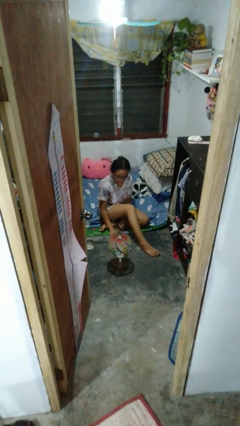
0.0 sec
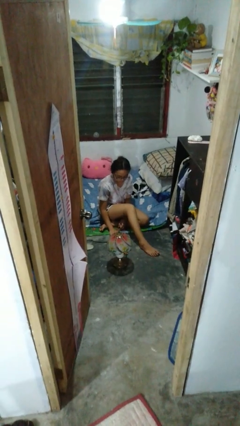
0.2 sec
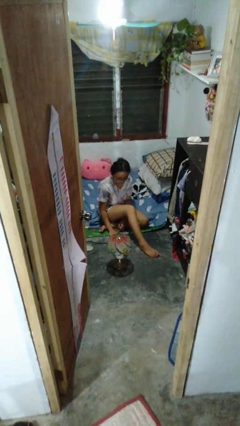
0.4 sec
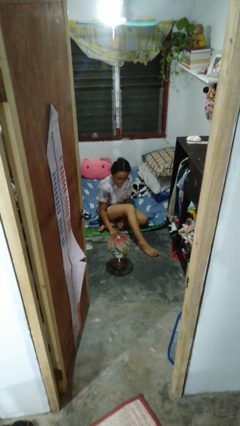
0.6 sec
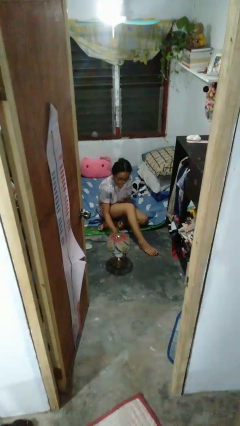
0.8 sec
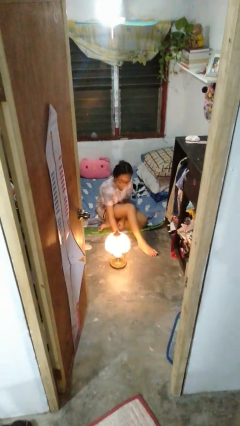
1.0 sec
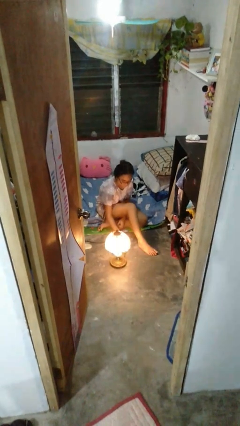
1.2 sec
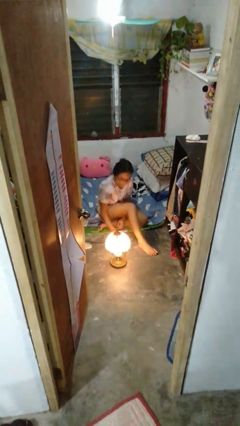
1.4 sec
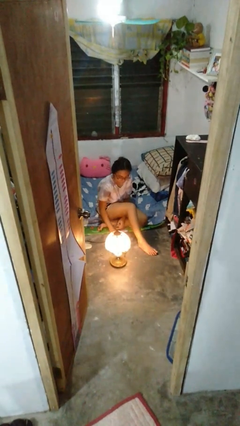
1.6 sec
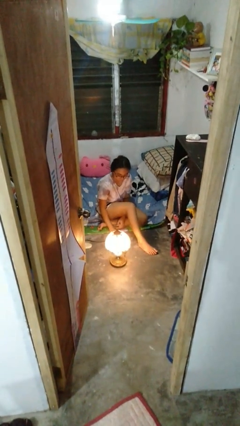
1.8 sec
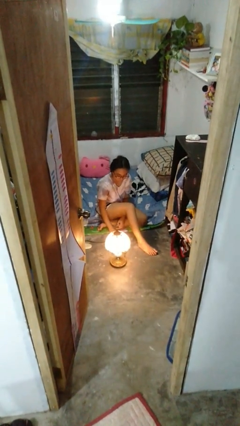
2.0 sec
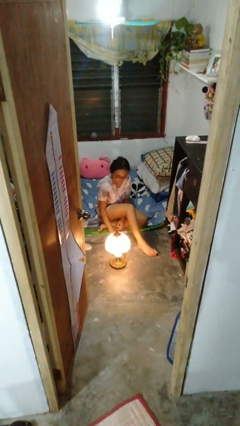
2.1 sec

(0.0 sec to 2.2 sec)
person turns on lamp

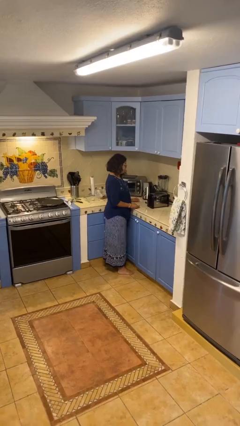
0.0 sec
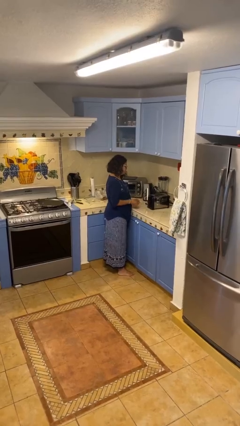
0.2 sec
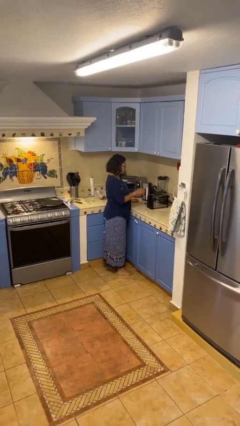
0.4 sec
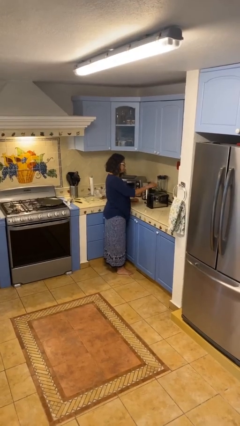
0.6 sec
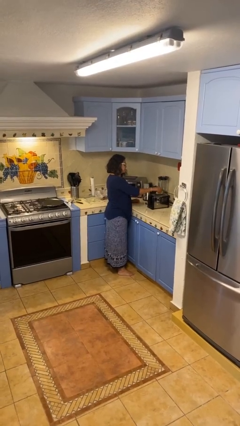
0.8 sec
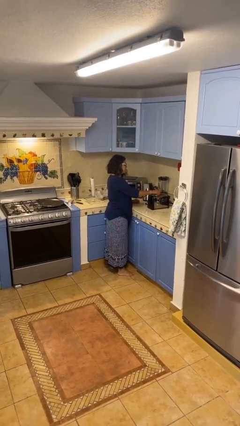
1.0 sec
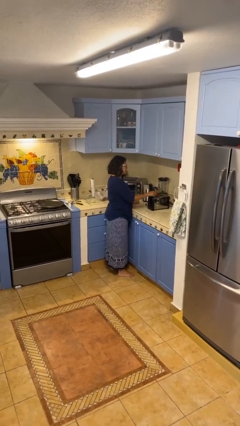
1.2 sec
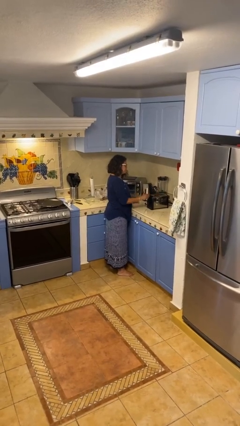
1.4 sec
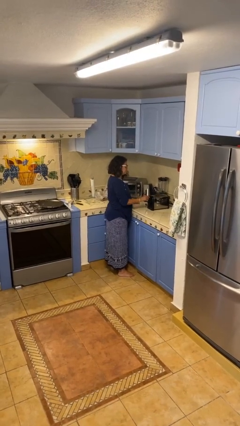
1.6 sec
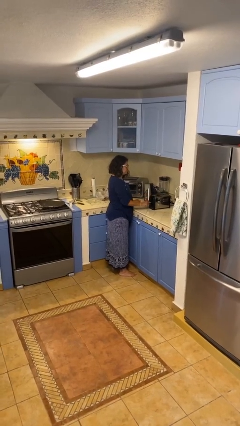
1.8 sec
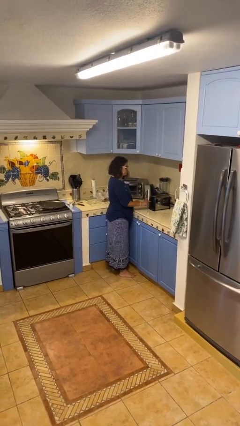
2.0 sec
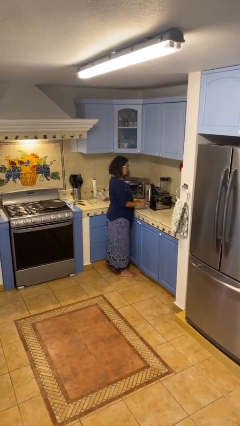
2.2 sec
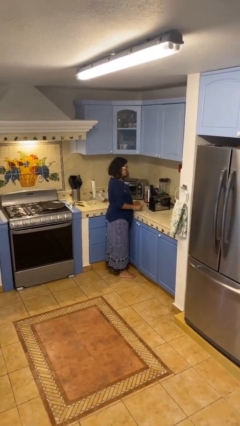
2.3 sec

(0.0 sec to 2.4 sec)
person puts object into toaster

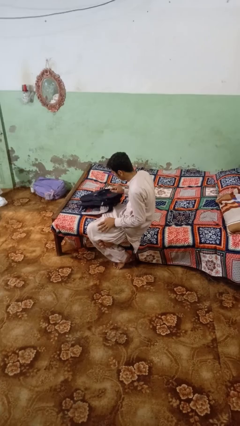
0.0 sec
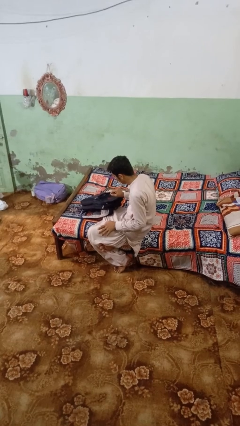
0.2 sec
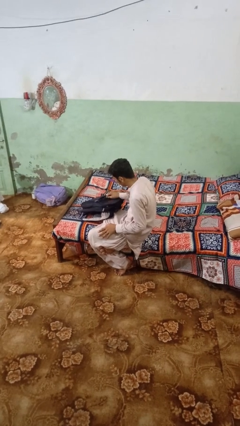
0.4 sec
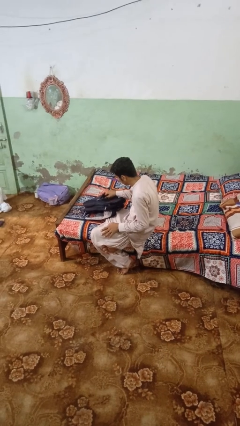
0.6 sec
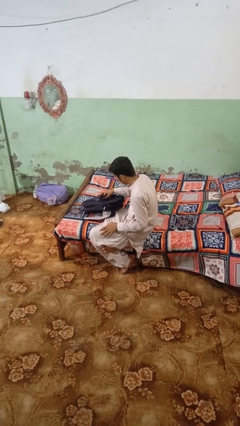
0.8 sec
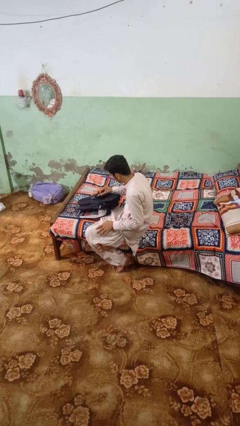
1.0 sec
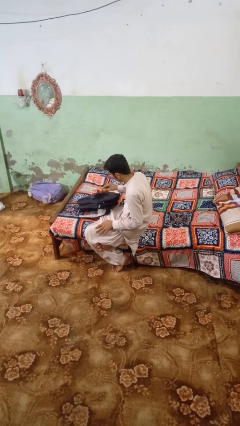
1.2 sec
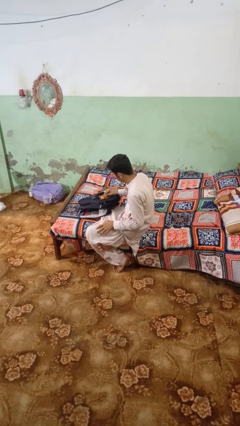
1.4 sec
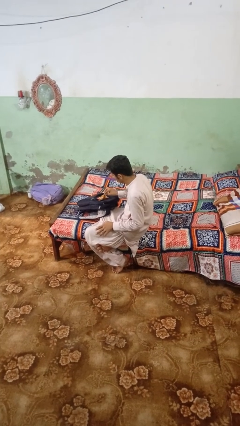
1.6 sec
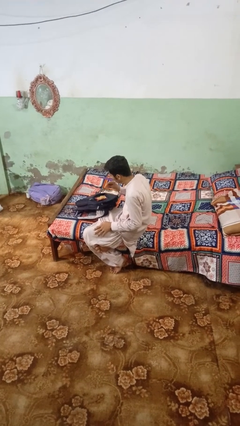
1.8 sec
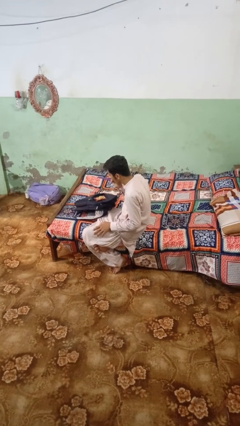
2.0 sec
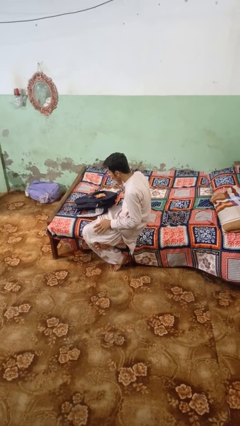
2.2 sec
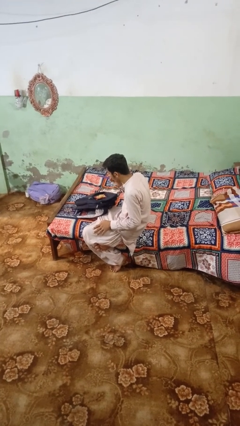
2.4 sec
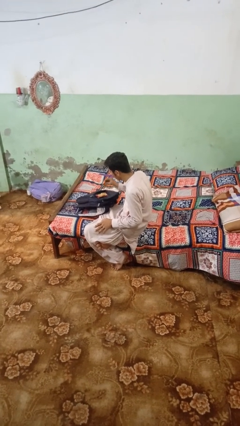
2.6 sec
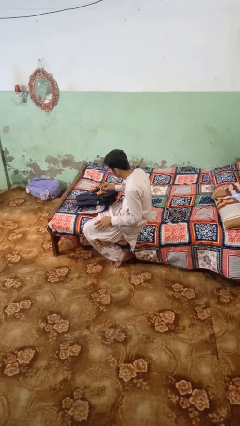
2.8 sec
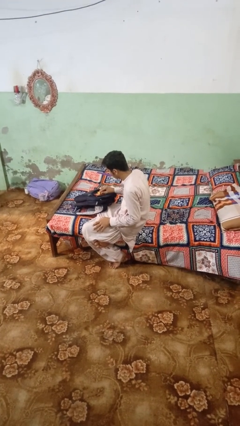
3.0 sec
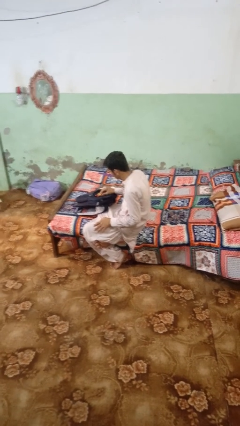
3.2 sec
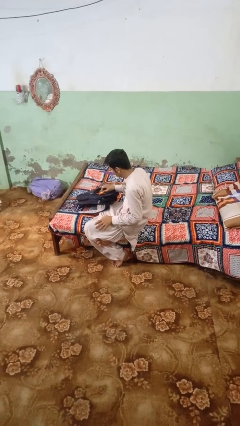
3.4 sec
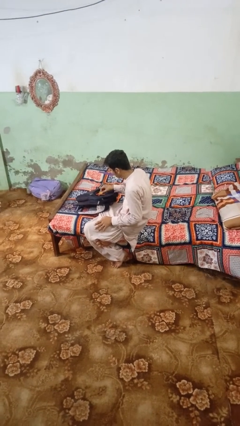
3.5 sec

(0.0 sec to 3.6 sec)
person eats snack from bag

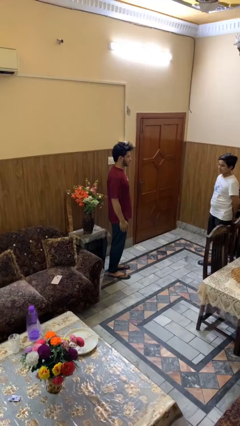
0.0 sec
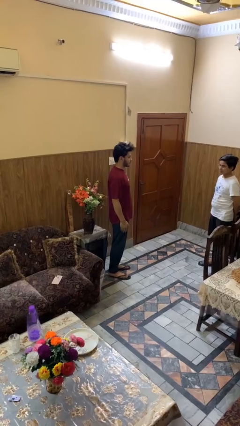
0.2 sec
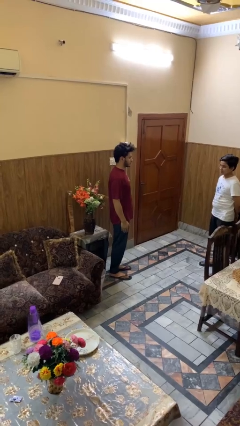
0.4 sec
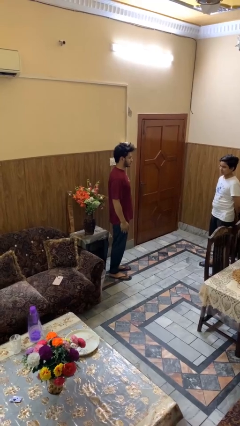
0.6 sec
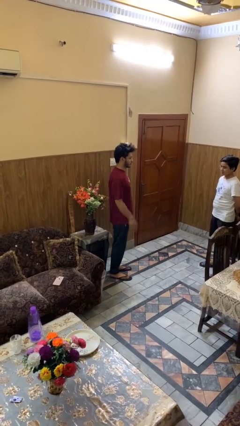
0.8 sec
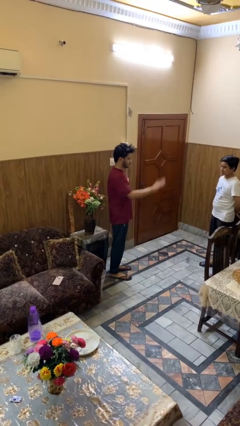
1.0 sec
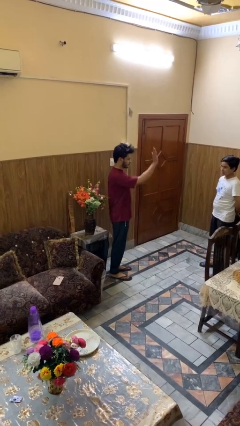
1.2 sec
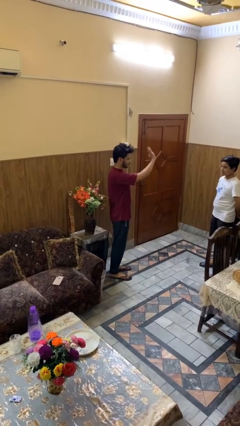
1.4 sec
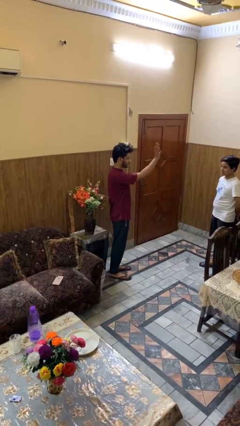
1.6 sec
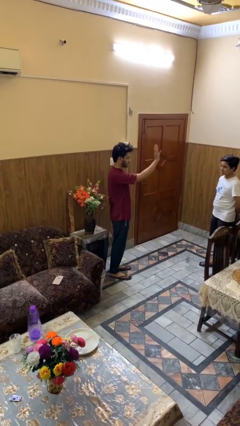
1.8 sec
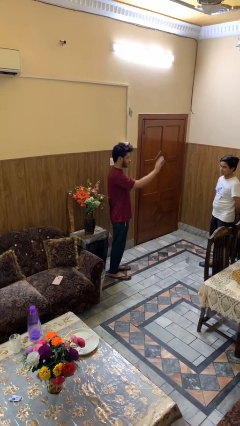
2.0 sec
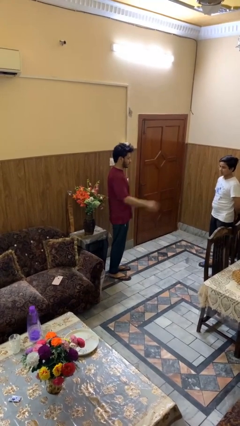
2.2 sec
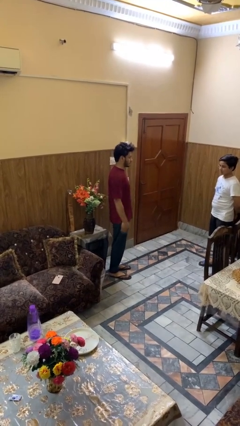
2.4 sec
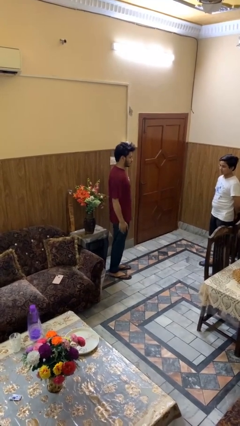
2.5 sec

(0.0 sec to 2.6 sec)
person waves at person

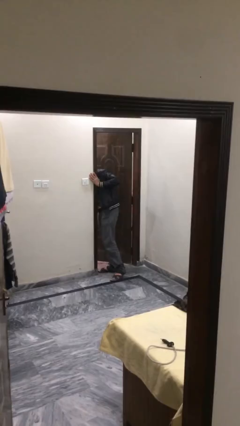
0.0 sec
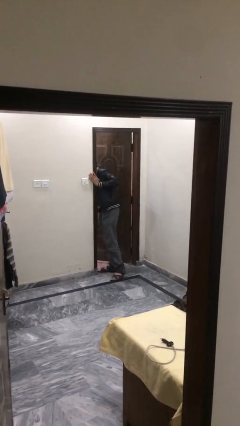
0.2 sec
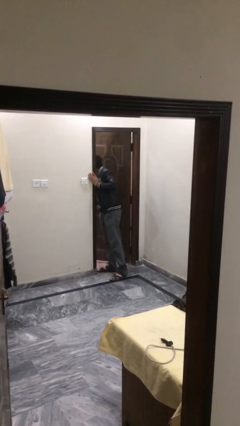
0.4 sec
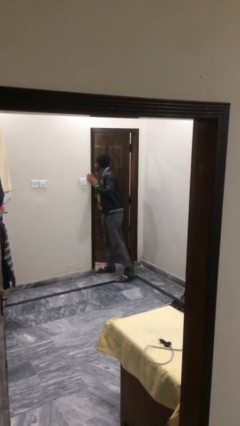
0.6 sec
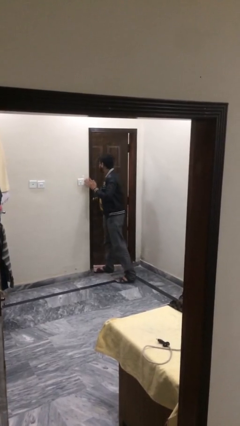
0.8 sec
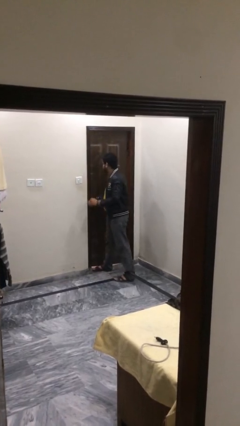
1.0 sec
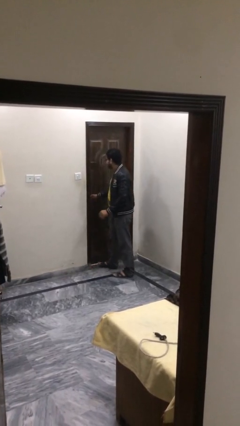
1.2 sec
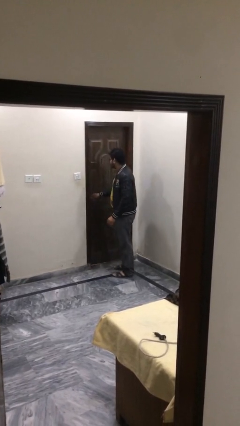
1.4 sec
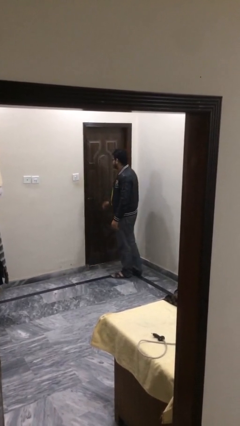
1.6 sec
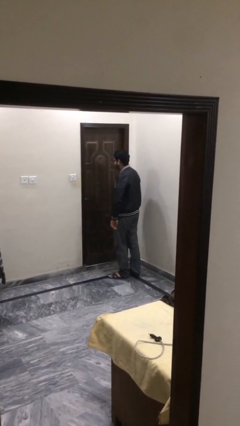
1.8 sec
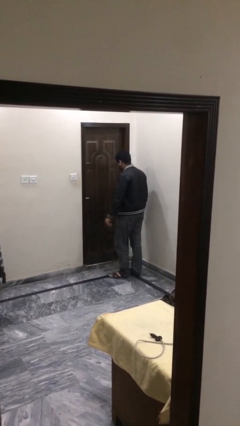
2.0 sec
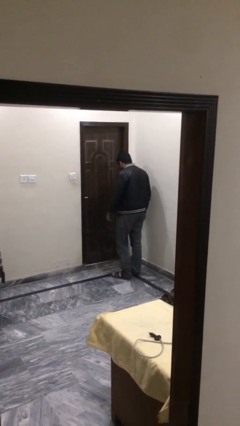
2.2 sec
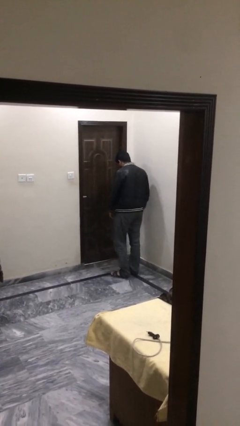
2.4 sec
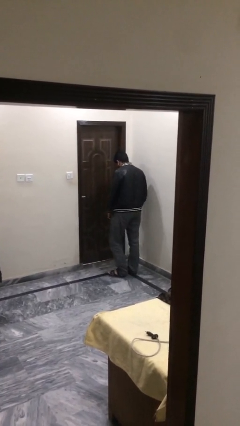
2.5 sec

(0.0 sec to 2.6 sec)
person closes facility door

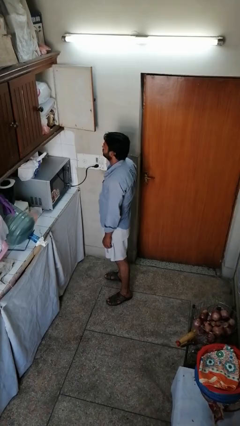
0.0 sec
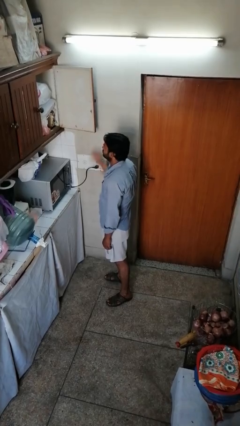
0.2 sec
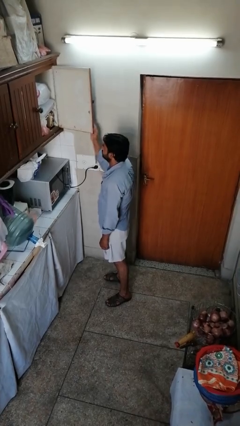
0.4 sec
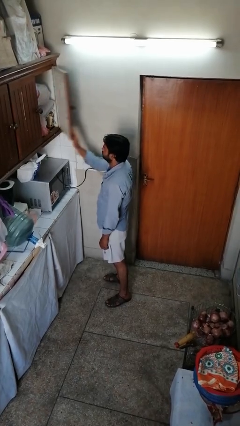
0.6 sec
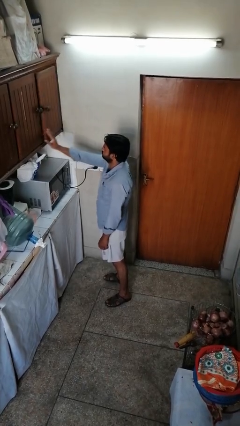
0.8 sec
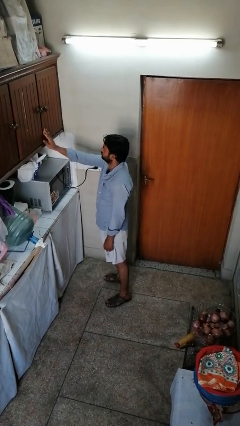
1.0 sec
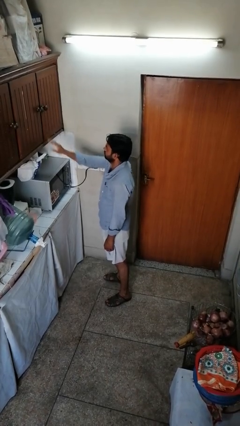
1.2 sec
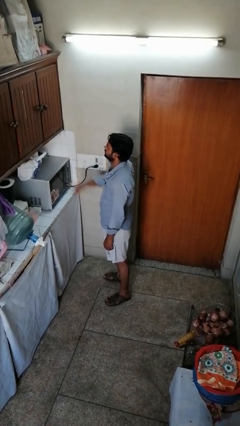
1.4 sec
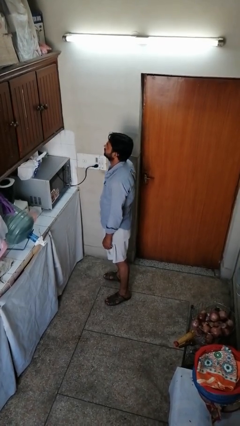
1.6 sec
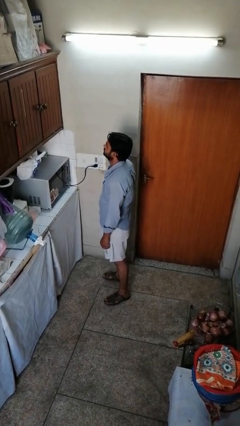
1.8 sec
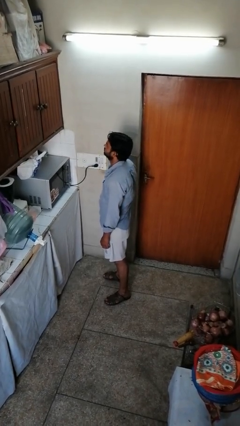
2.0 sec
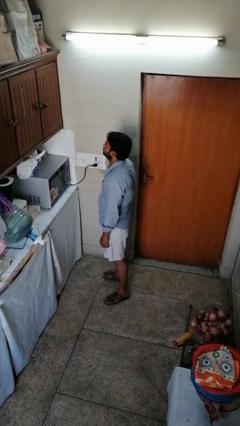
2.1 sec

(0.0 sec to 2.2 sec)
person closes cabinet

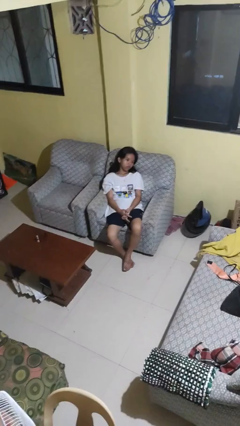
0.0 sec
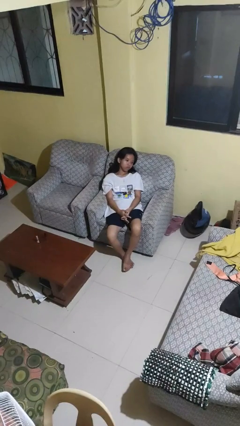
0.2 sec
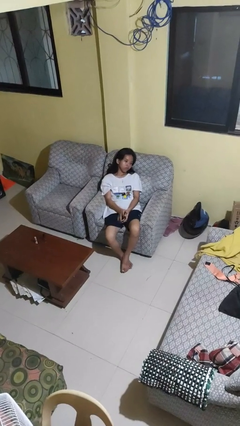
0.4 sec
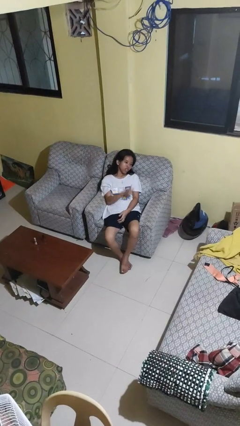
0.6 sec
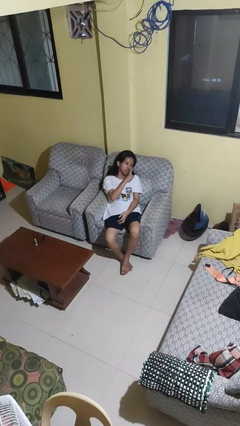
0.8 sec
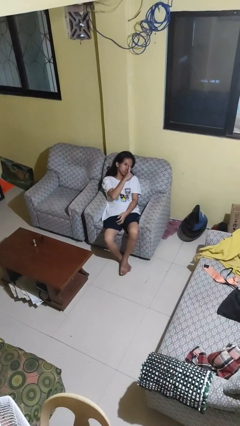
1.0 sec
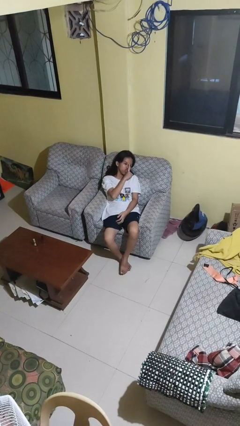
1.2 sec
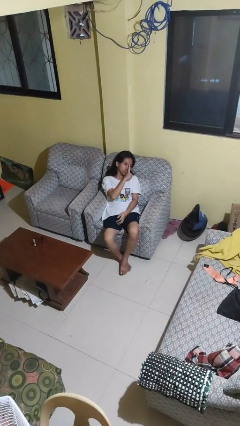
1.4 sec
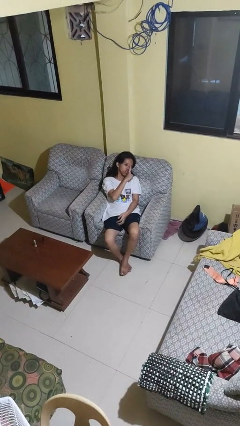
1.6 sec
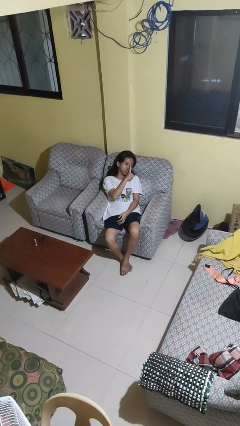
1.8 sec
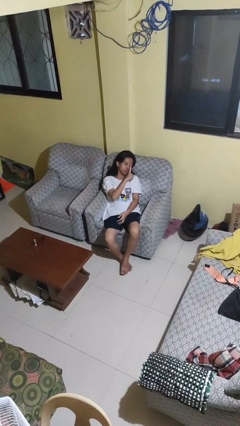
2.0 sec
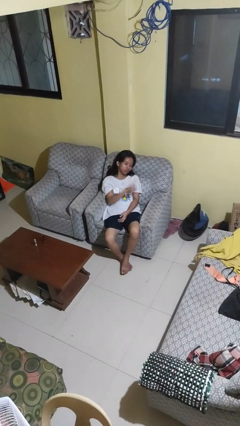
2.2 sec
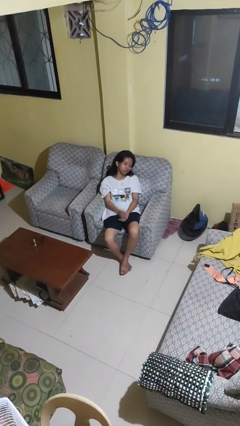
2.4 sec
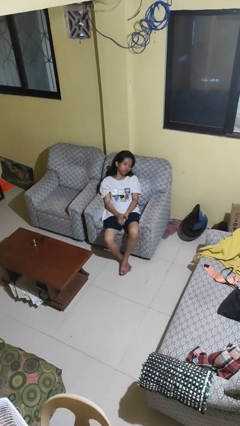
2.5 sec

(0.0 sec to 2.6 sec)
person gestures be quiet
